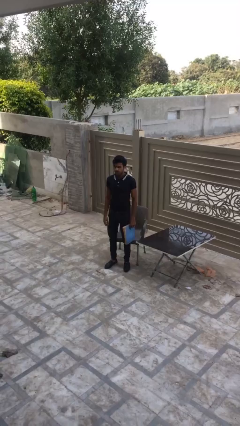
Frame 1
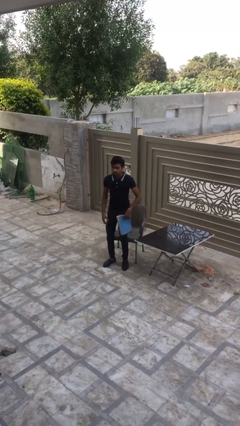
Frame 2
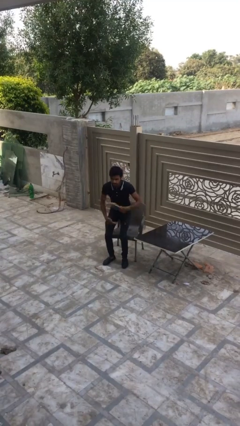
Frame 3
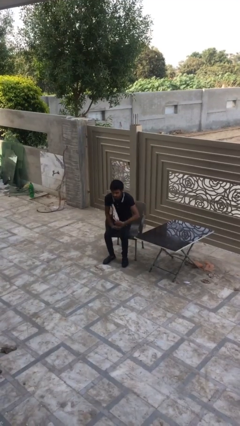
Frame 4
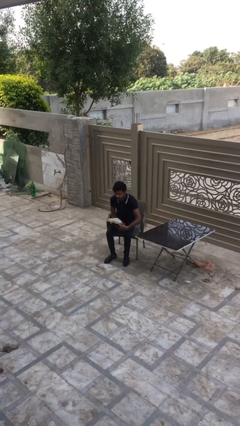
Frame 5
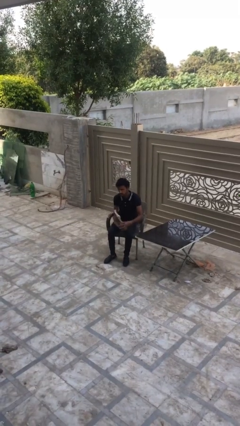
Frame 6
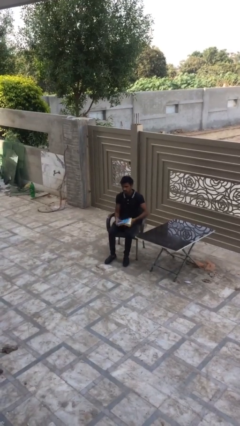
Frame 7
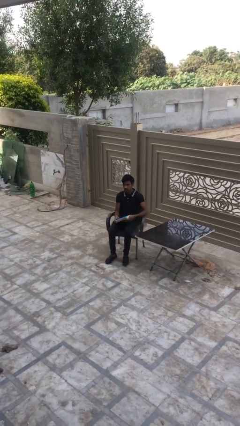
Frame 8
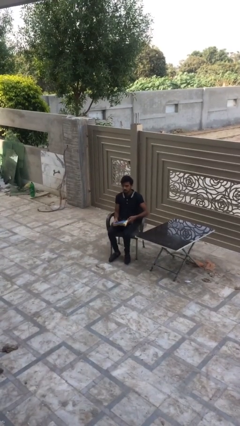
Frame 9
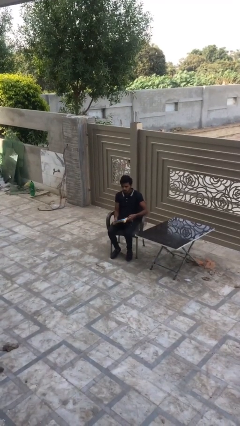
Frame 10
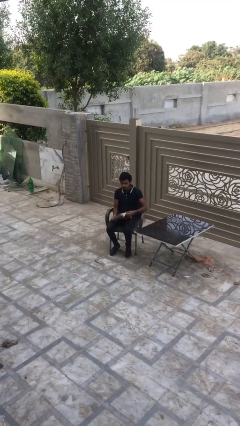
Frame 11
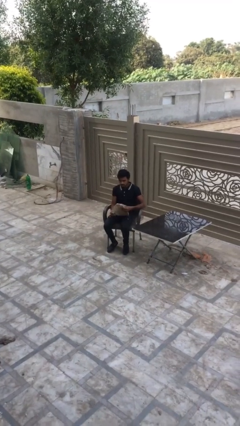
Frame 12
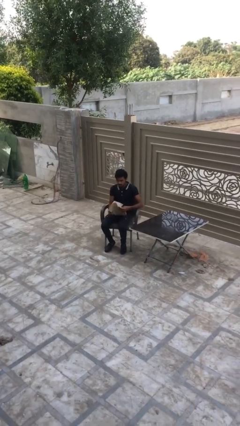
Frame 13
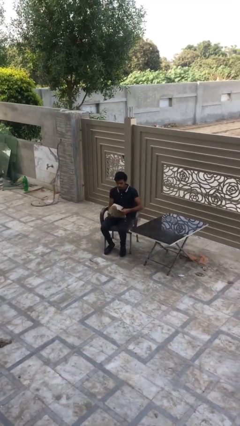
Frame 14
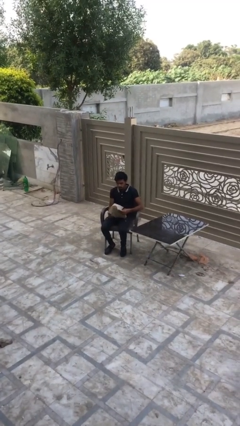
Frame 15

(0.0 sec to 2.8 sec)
person sits down

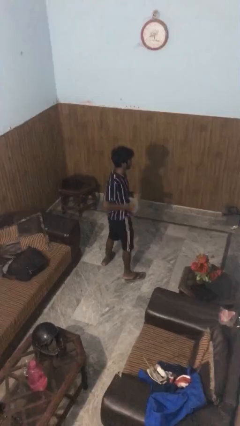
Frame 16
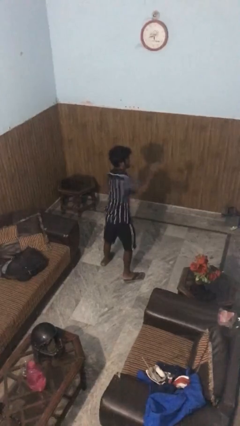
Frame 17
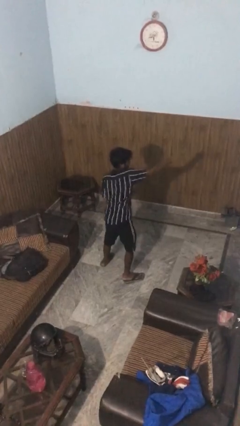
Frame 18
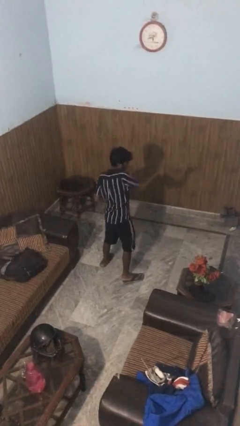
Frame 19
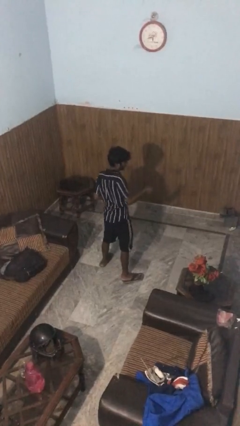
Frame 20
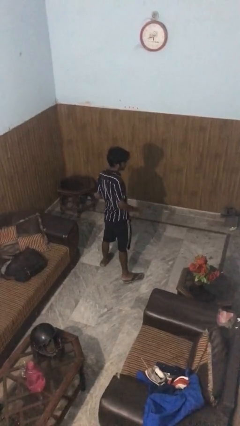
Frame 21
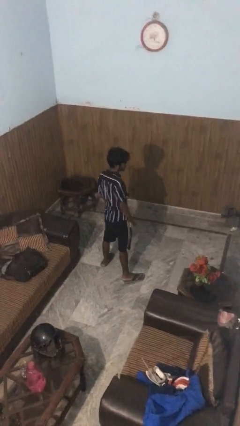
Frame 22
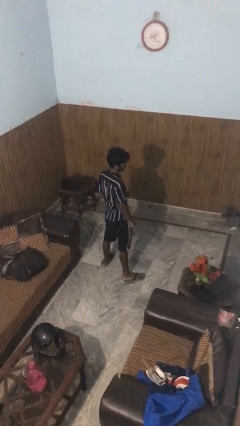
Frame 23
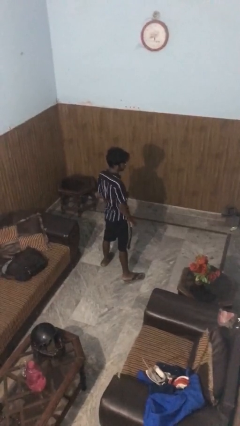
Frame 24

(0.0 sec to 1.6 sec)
person punches

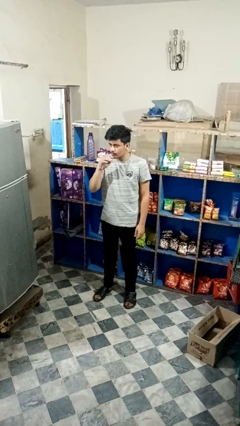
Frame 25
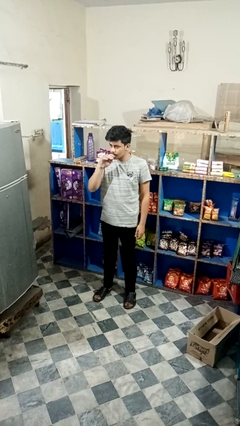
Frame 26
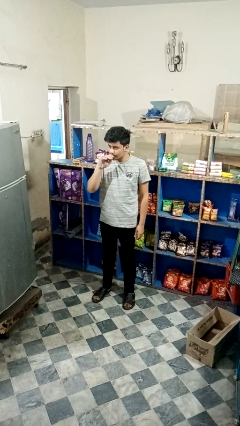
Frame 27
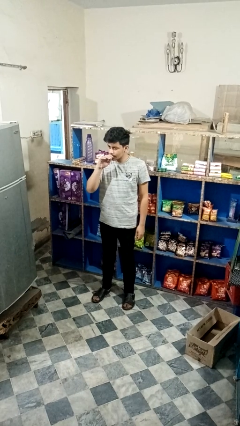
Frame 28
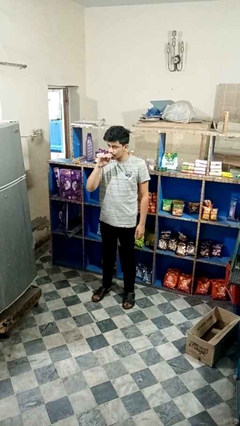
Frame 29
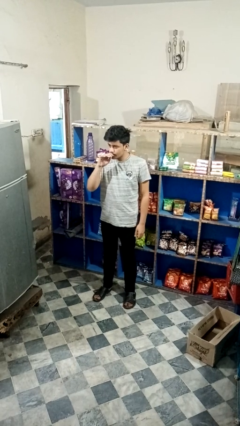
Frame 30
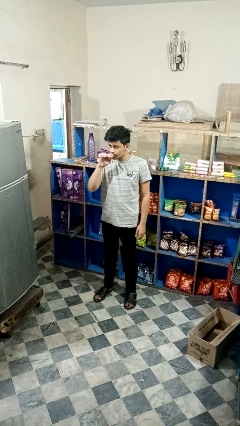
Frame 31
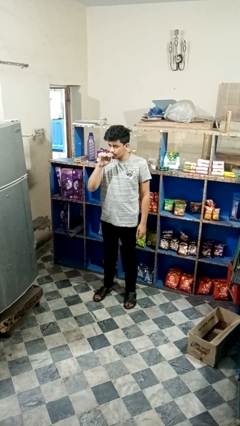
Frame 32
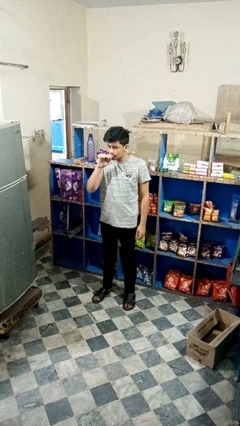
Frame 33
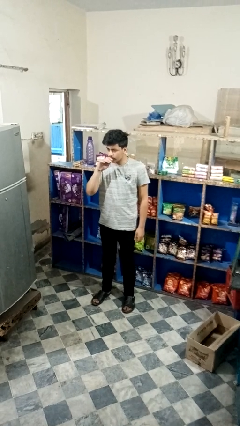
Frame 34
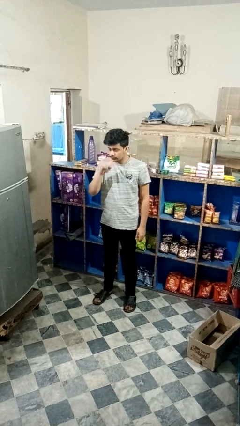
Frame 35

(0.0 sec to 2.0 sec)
person vapes

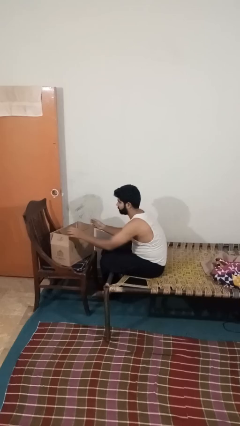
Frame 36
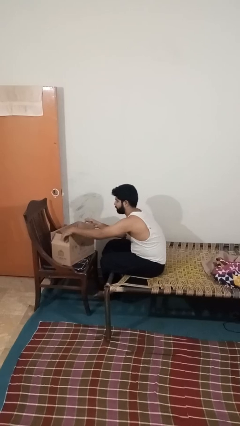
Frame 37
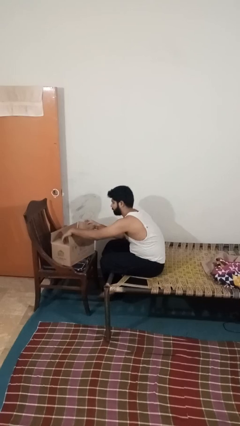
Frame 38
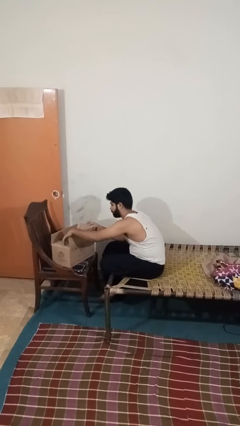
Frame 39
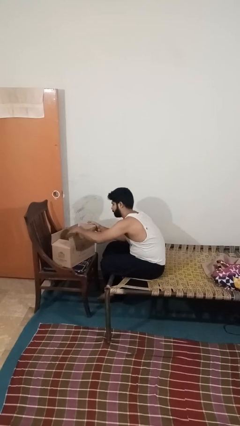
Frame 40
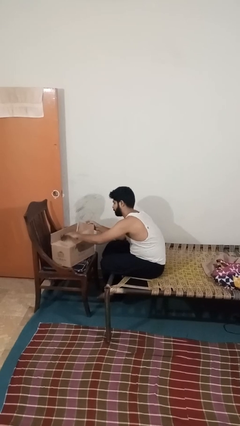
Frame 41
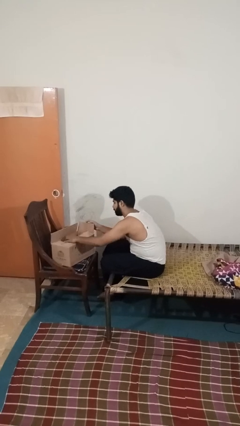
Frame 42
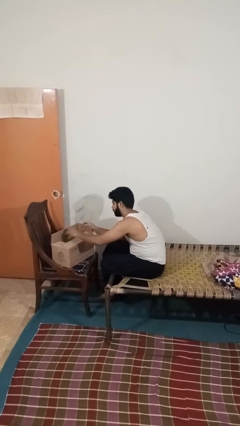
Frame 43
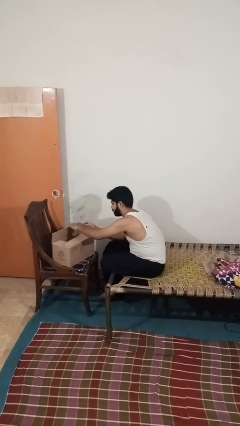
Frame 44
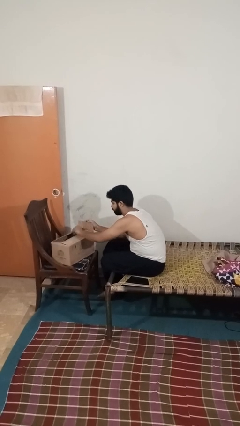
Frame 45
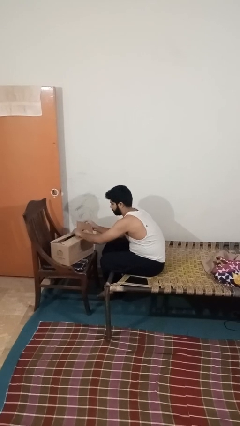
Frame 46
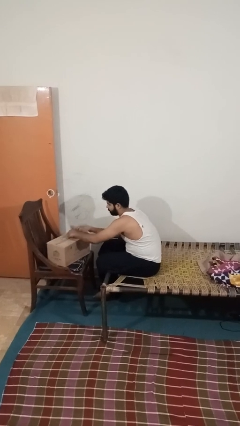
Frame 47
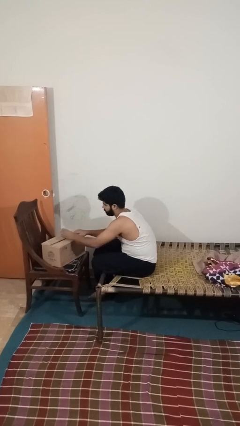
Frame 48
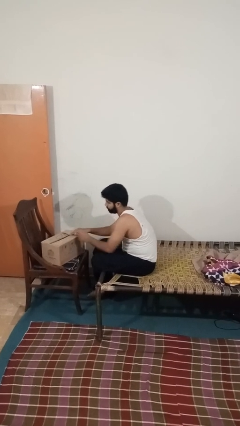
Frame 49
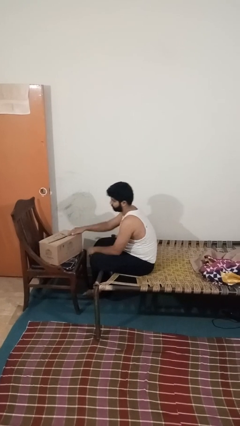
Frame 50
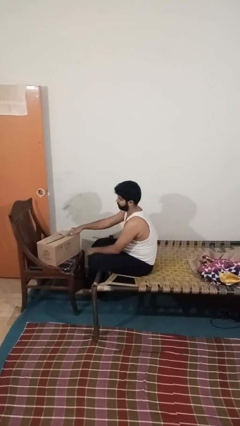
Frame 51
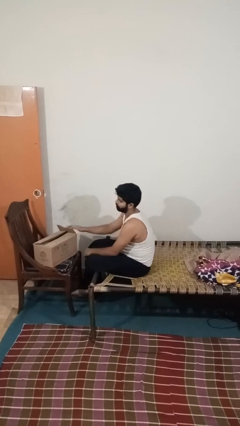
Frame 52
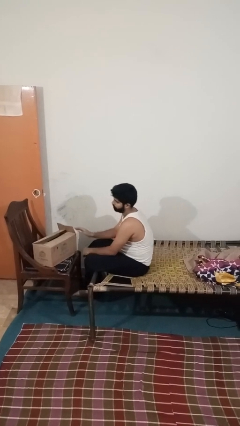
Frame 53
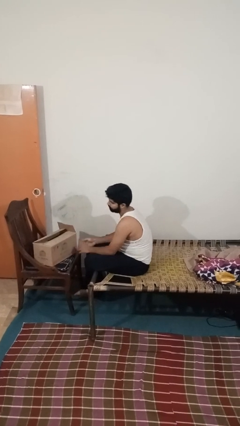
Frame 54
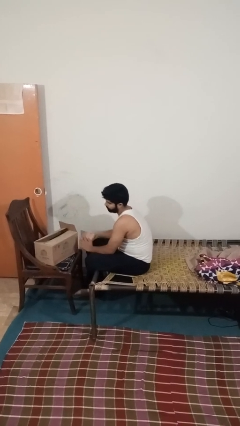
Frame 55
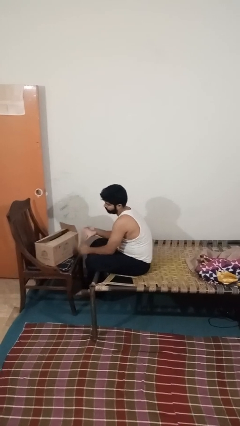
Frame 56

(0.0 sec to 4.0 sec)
person closes box

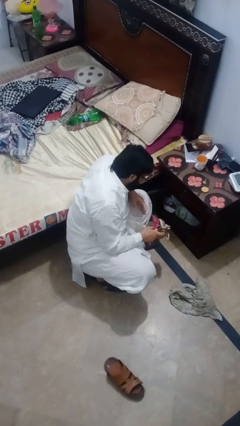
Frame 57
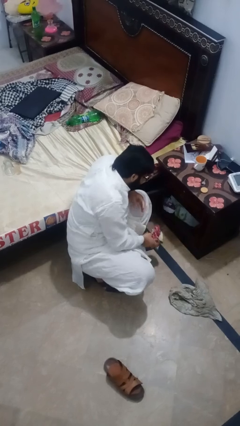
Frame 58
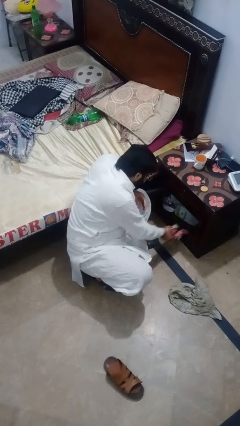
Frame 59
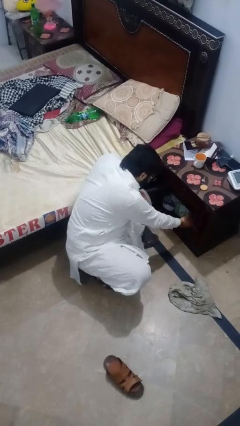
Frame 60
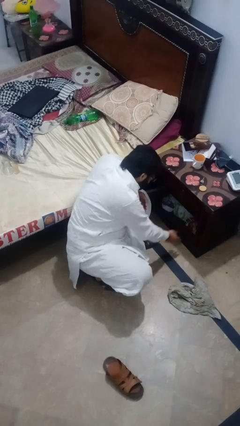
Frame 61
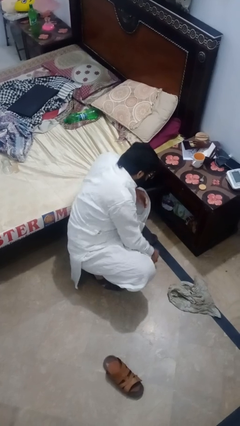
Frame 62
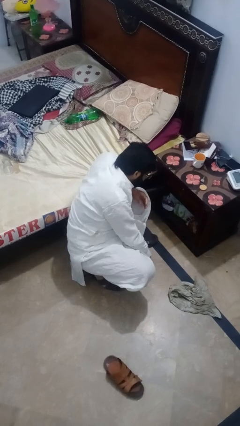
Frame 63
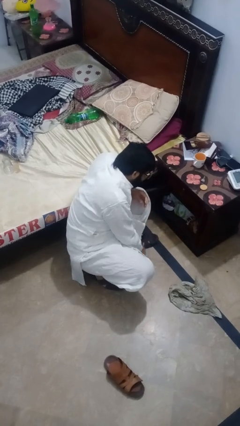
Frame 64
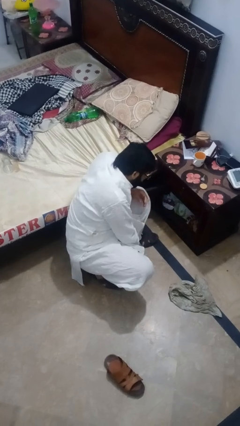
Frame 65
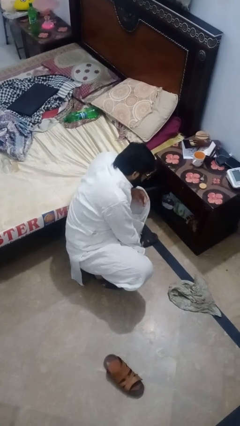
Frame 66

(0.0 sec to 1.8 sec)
person puts down object into cabinet

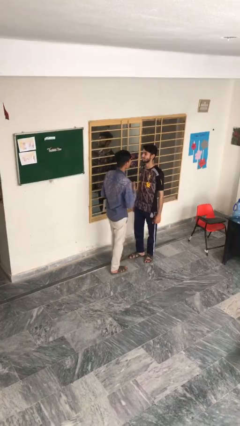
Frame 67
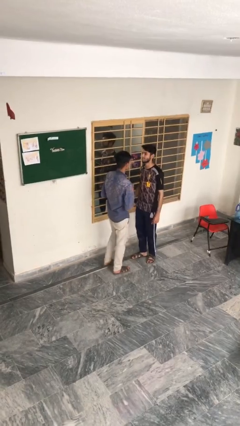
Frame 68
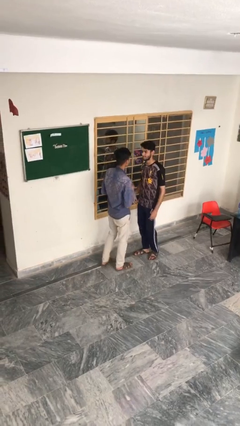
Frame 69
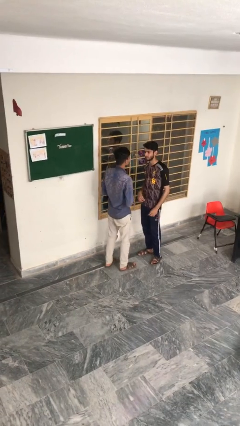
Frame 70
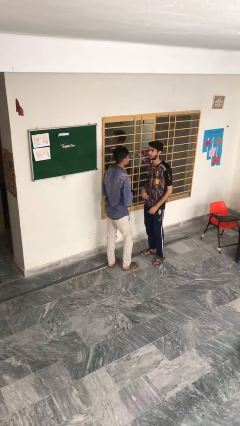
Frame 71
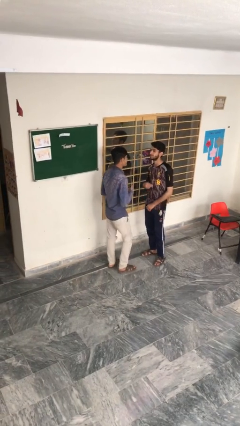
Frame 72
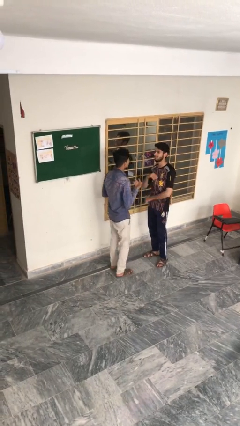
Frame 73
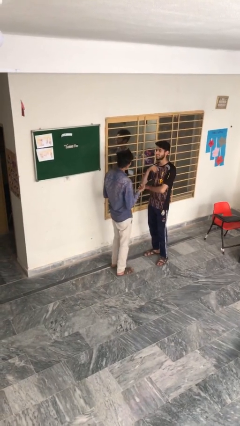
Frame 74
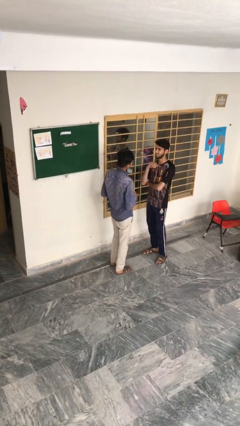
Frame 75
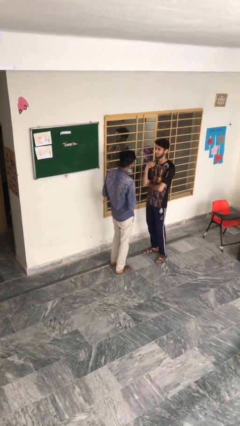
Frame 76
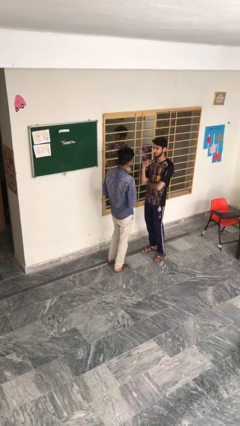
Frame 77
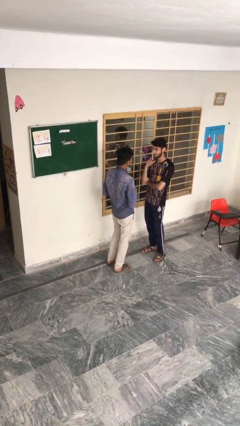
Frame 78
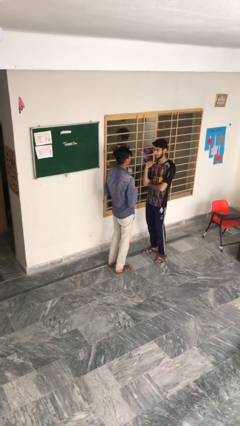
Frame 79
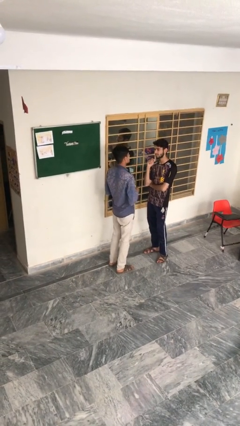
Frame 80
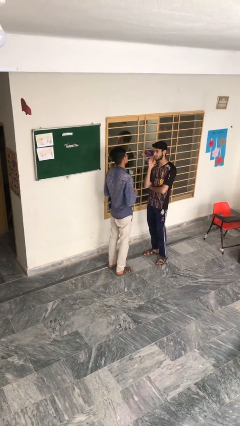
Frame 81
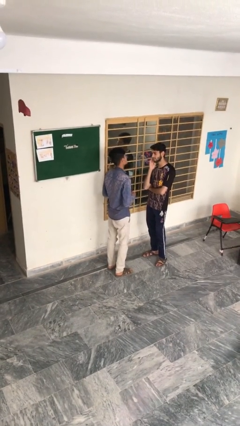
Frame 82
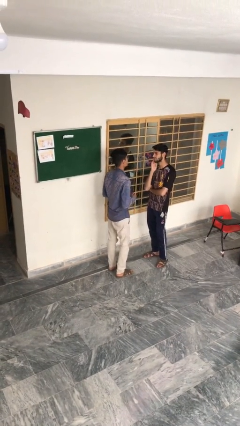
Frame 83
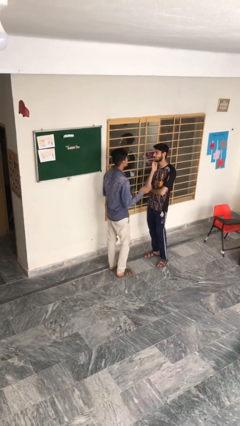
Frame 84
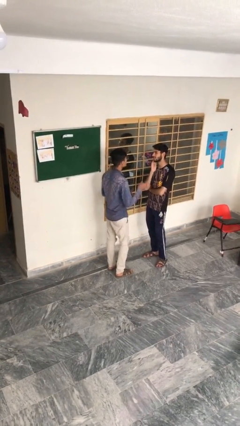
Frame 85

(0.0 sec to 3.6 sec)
person talks to person

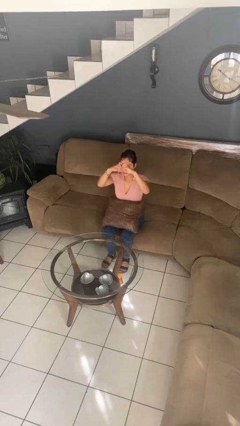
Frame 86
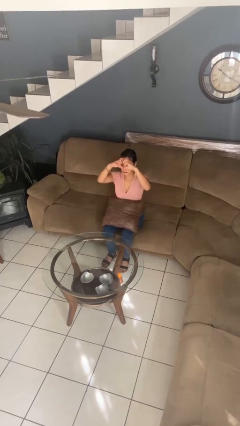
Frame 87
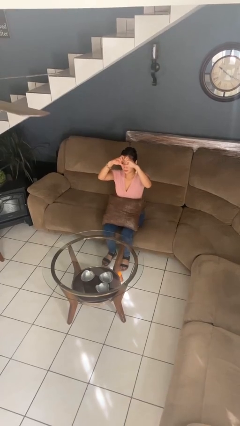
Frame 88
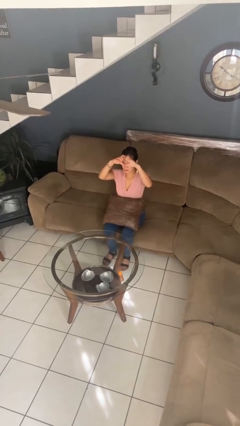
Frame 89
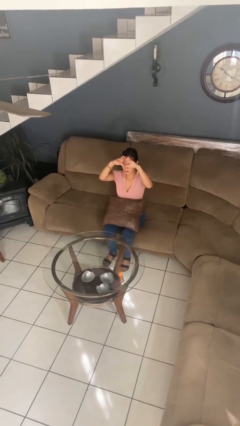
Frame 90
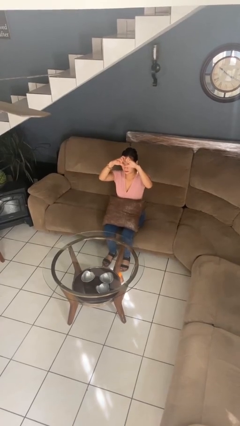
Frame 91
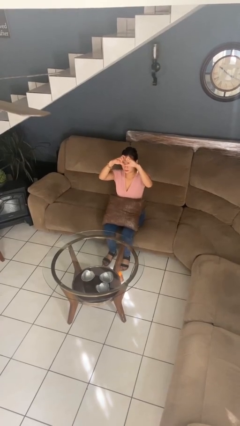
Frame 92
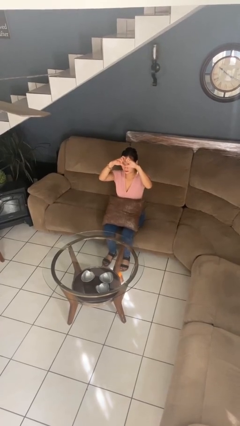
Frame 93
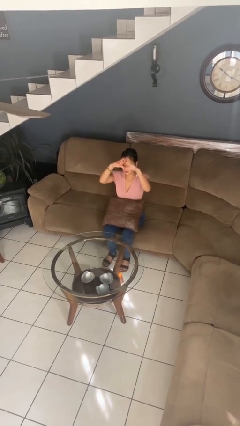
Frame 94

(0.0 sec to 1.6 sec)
person gestures heart
